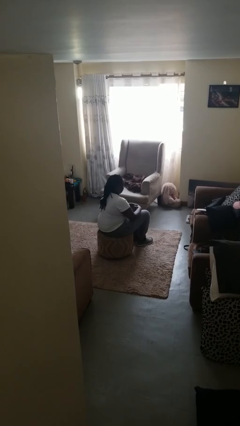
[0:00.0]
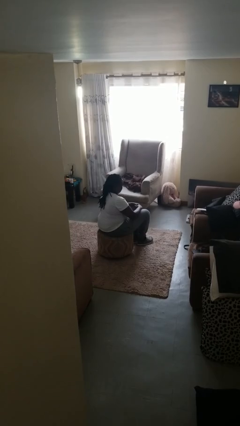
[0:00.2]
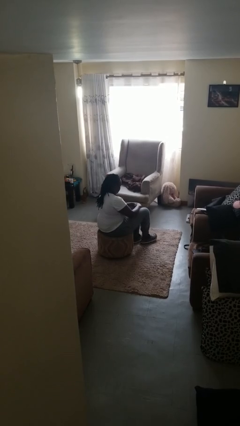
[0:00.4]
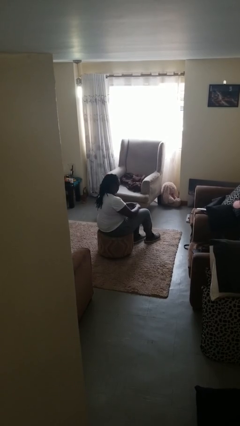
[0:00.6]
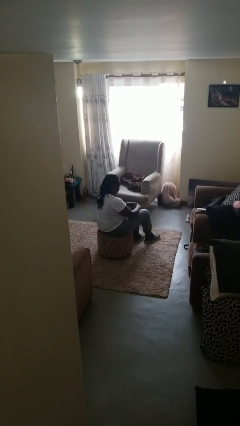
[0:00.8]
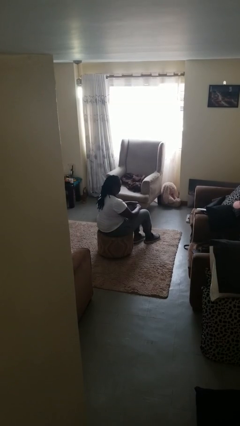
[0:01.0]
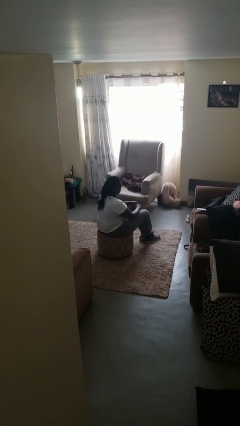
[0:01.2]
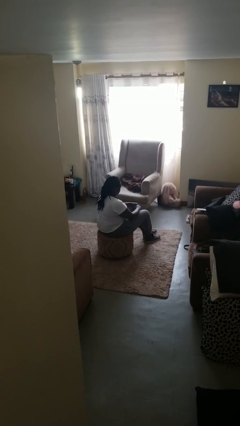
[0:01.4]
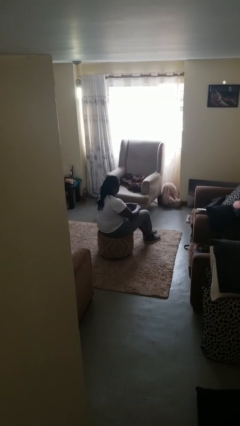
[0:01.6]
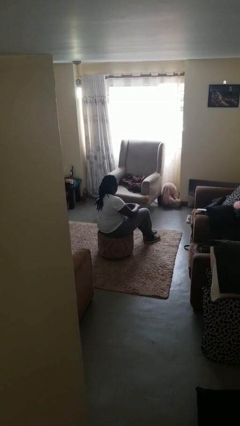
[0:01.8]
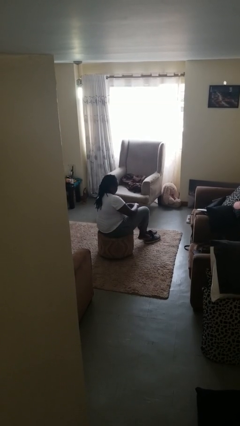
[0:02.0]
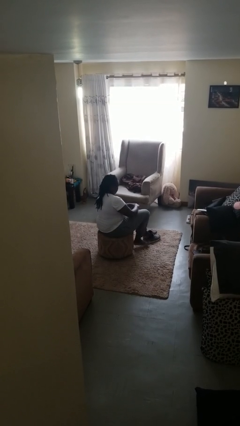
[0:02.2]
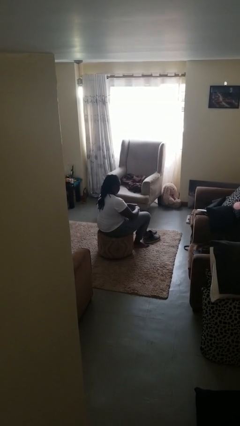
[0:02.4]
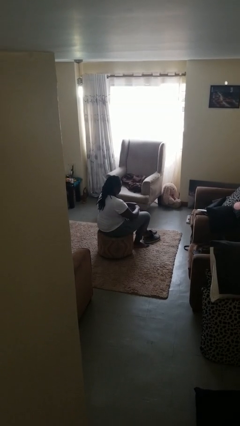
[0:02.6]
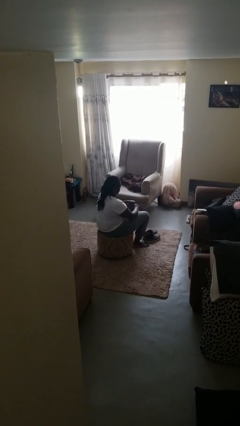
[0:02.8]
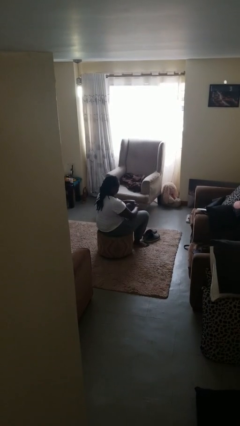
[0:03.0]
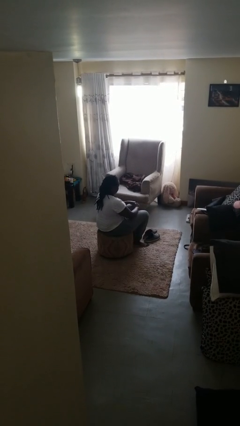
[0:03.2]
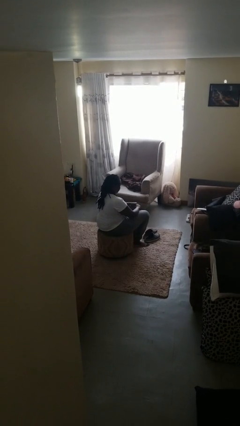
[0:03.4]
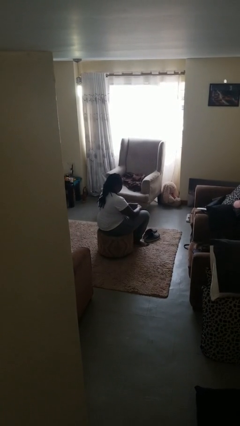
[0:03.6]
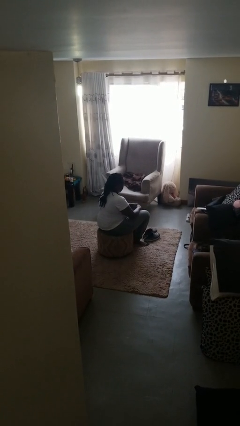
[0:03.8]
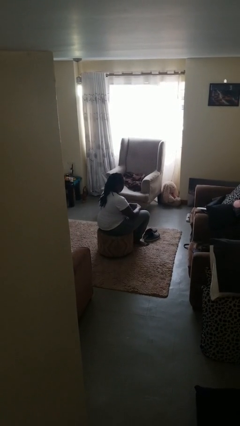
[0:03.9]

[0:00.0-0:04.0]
person takes off shoes

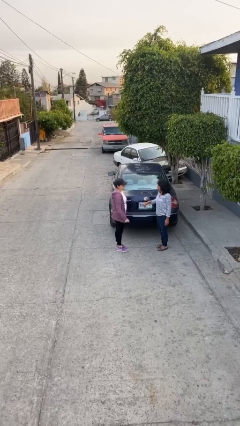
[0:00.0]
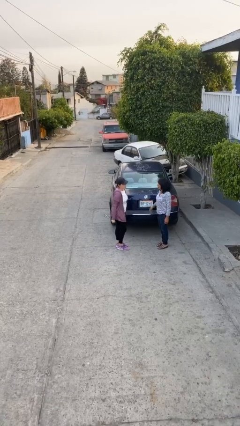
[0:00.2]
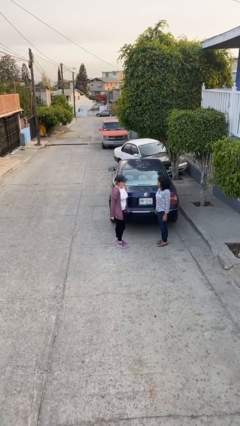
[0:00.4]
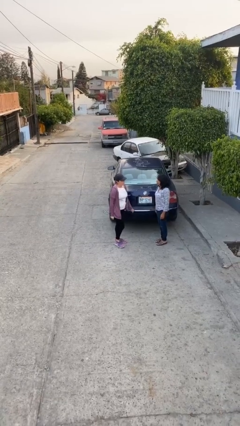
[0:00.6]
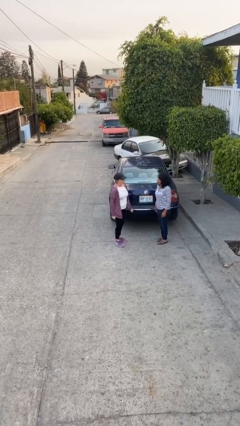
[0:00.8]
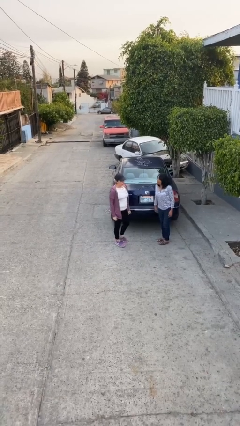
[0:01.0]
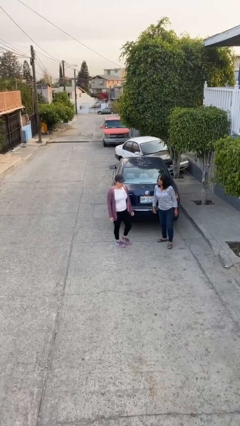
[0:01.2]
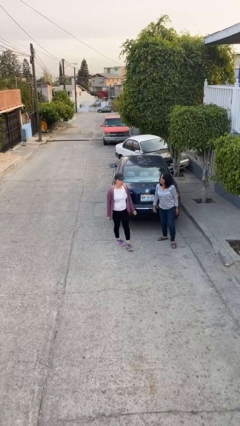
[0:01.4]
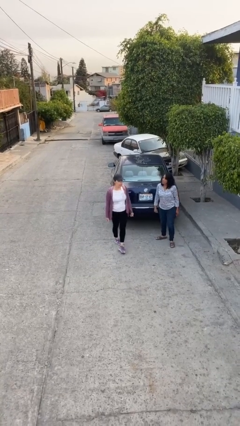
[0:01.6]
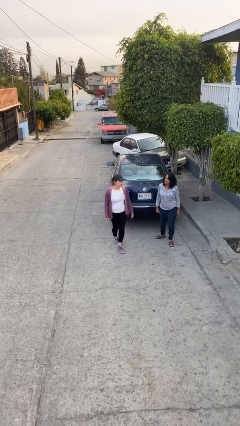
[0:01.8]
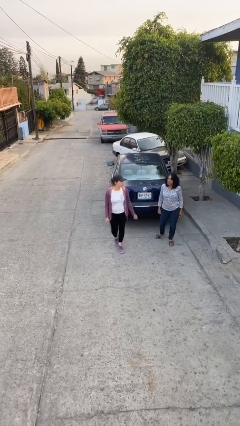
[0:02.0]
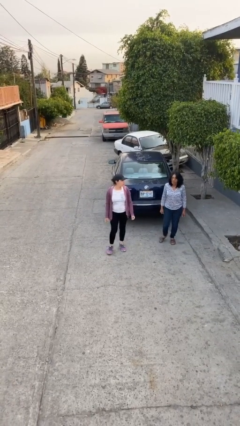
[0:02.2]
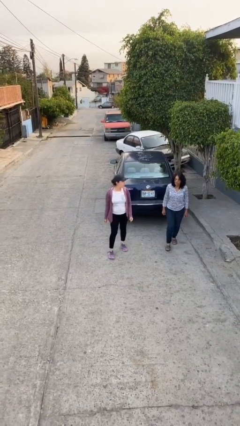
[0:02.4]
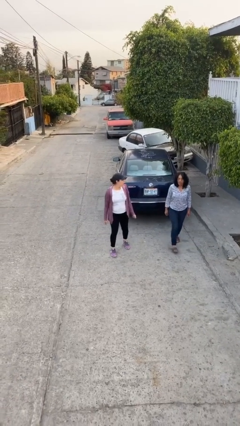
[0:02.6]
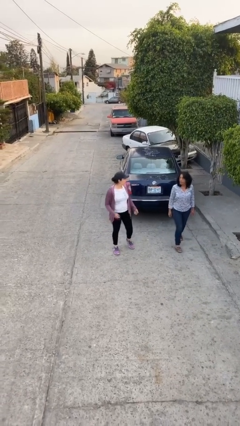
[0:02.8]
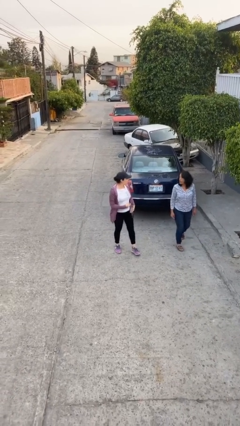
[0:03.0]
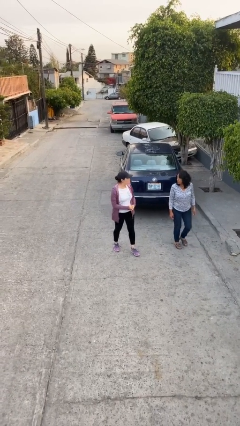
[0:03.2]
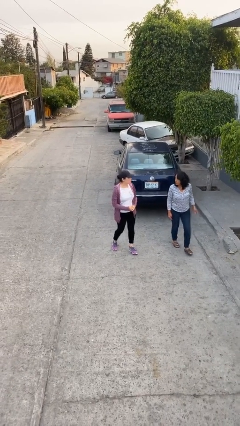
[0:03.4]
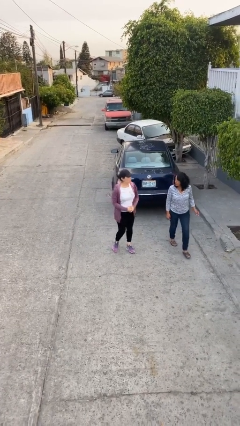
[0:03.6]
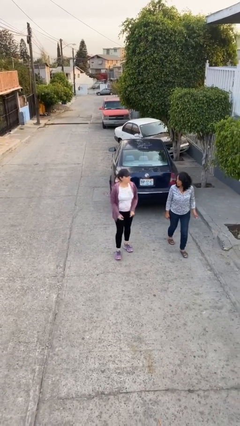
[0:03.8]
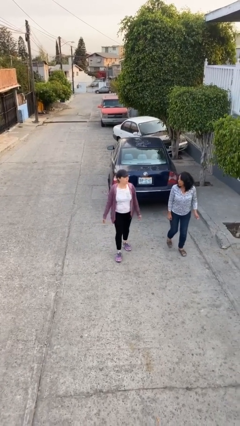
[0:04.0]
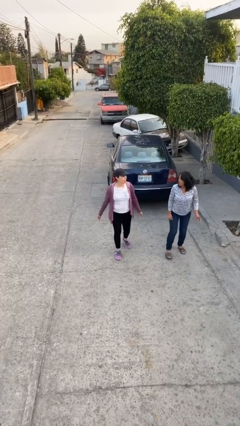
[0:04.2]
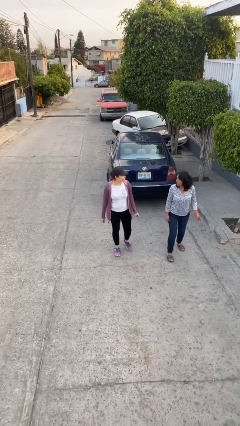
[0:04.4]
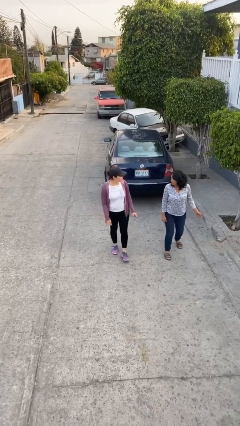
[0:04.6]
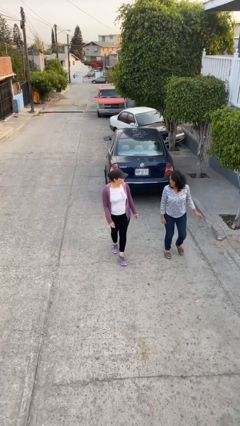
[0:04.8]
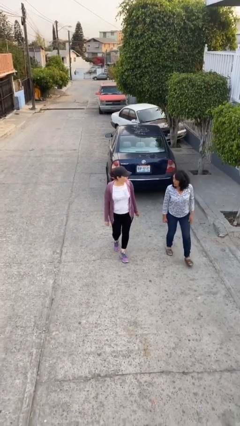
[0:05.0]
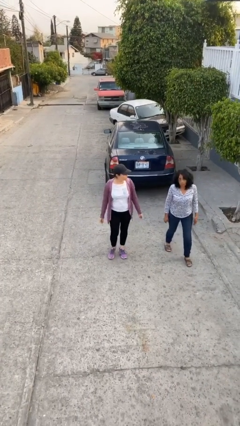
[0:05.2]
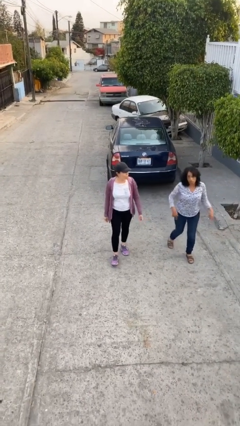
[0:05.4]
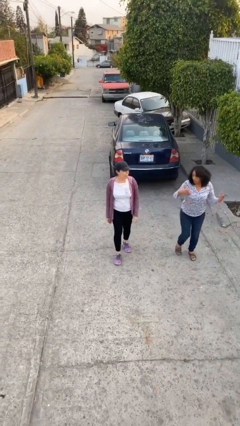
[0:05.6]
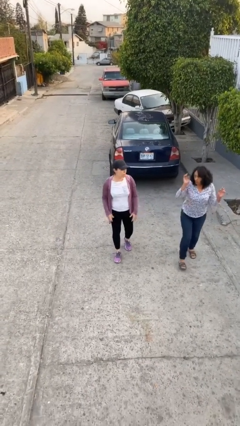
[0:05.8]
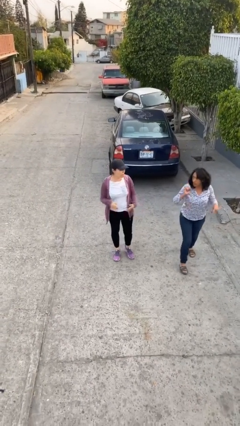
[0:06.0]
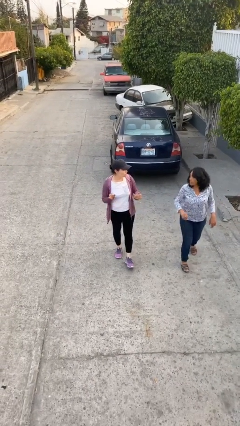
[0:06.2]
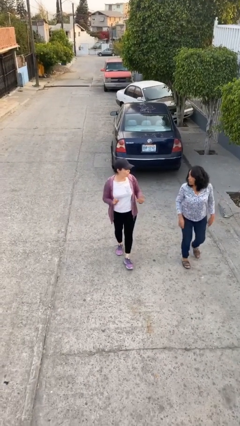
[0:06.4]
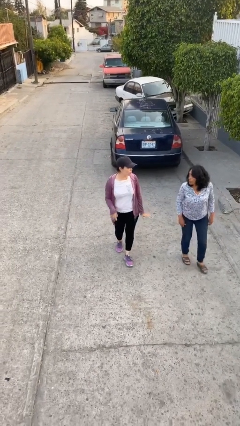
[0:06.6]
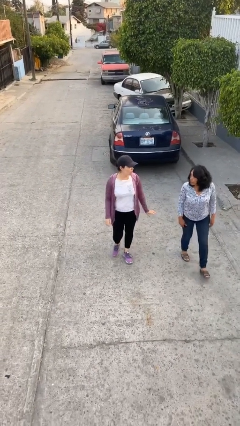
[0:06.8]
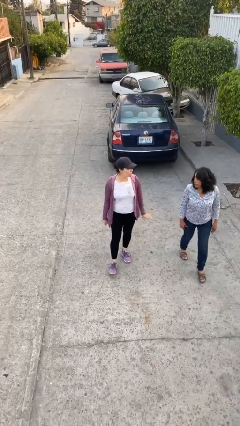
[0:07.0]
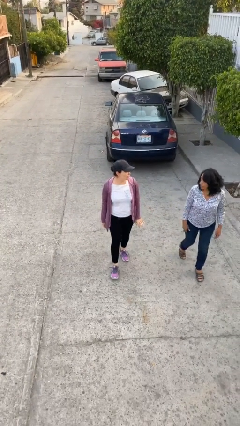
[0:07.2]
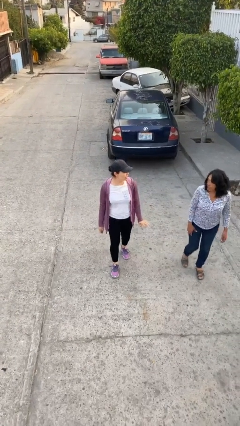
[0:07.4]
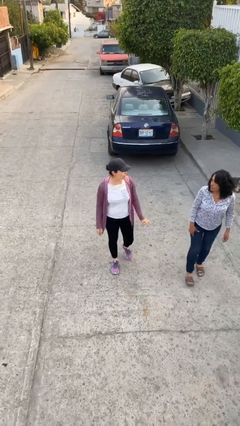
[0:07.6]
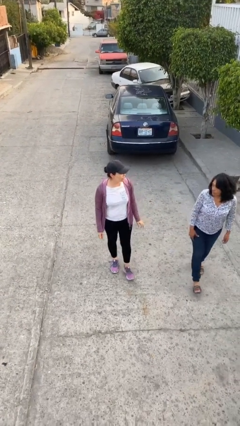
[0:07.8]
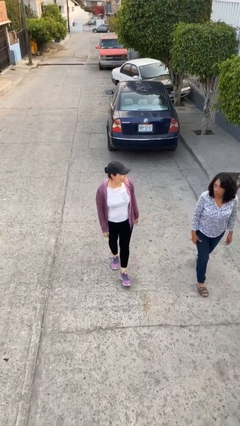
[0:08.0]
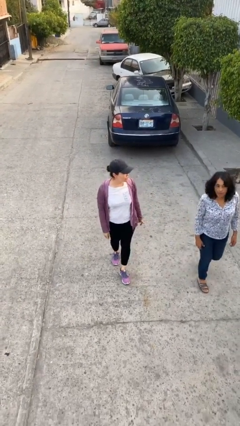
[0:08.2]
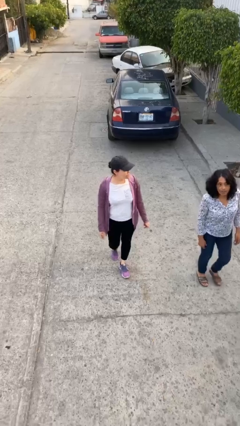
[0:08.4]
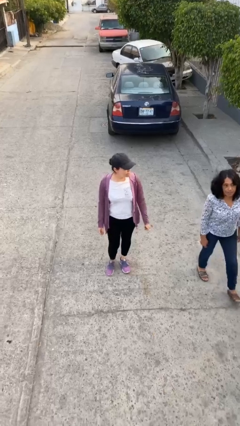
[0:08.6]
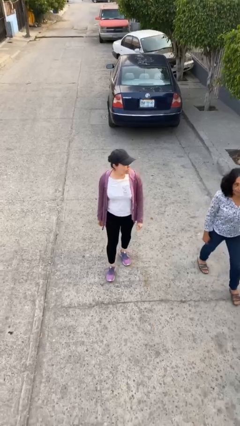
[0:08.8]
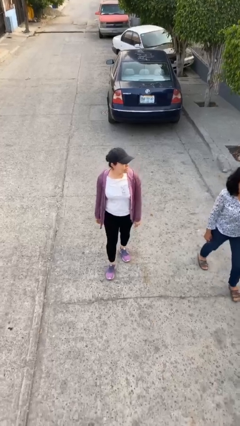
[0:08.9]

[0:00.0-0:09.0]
person talks to person

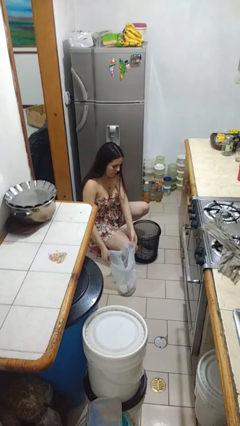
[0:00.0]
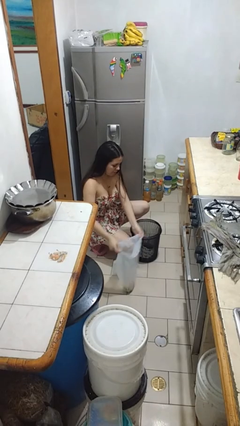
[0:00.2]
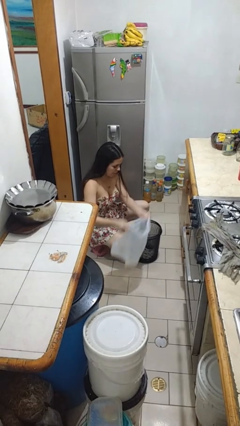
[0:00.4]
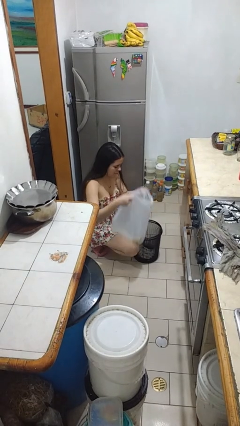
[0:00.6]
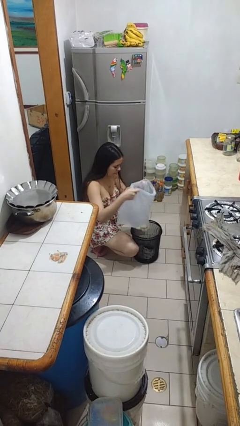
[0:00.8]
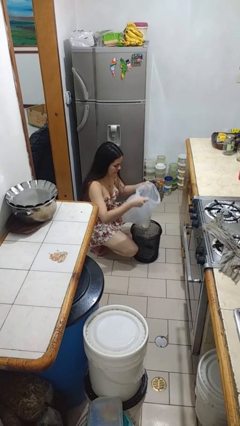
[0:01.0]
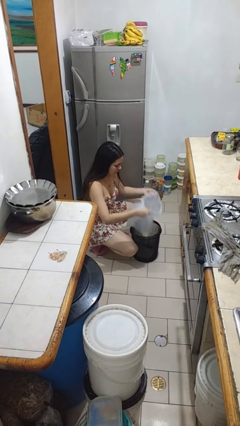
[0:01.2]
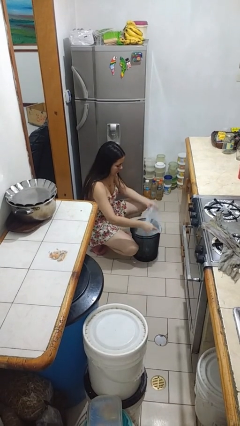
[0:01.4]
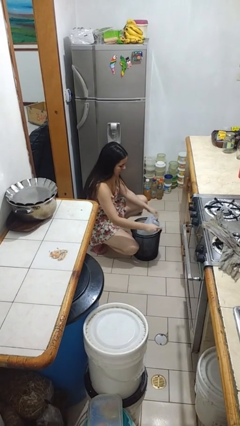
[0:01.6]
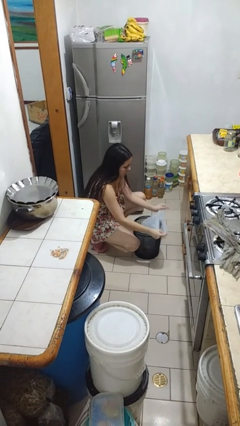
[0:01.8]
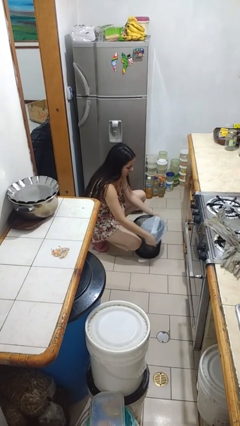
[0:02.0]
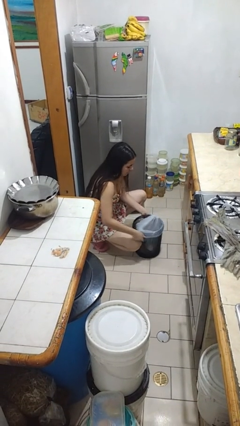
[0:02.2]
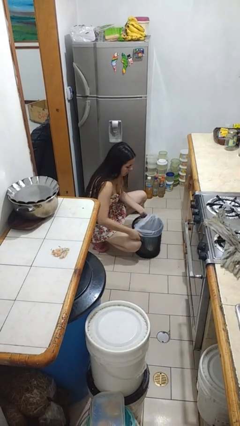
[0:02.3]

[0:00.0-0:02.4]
person inserts trashbag into trashcan

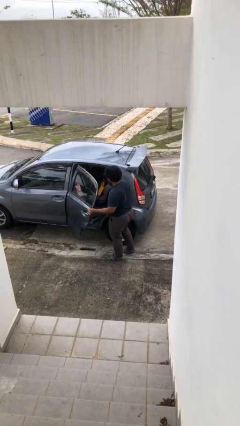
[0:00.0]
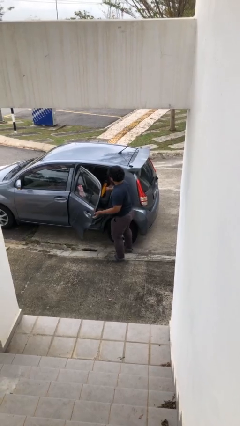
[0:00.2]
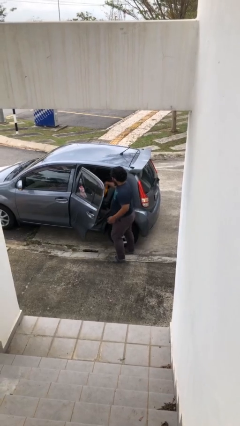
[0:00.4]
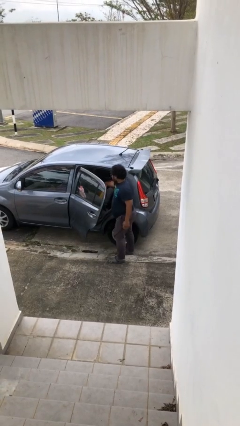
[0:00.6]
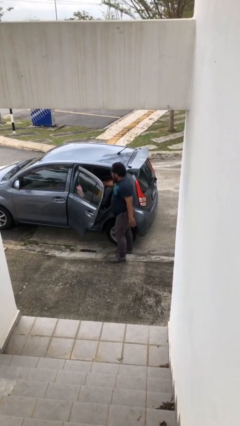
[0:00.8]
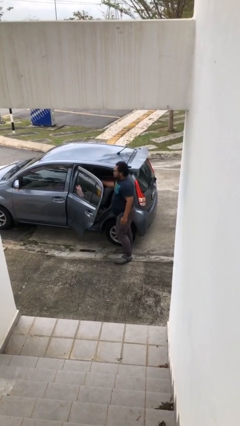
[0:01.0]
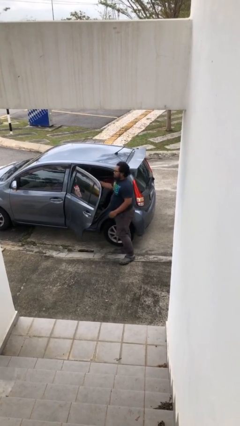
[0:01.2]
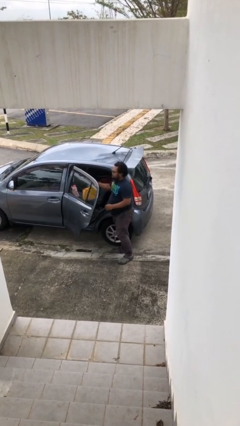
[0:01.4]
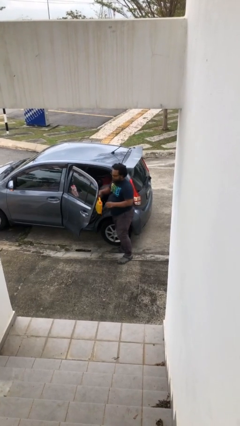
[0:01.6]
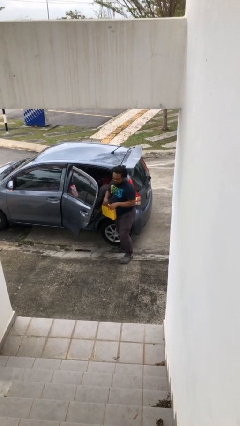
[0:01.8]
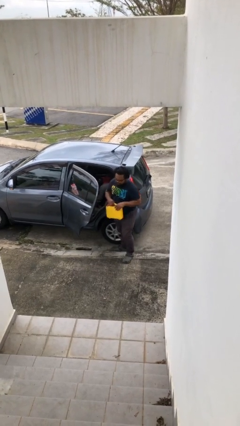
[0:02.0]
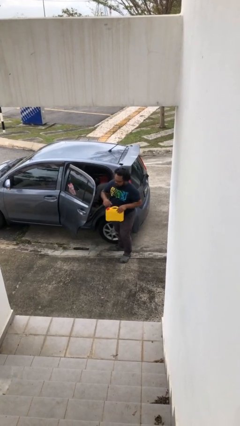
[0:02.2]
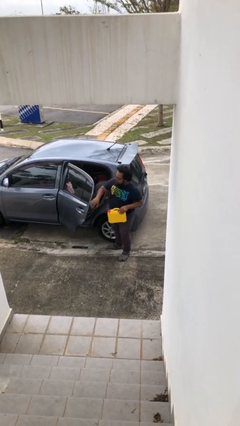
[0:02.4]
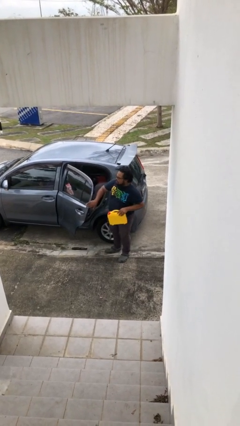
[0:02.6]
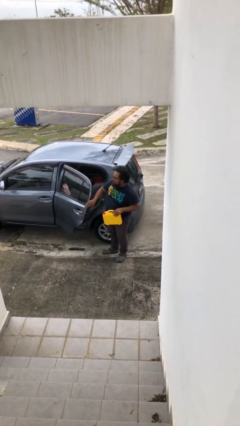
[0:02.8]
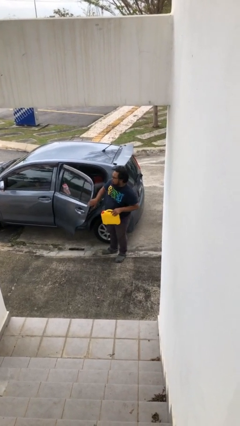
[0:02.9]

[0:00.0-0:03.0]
person unloads car
